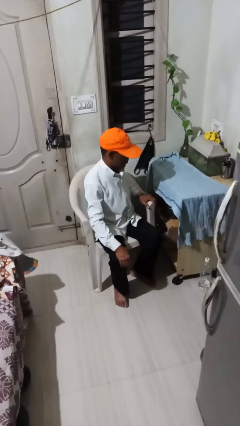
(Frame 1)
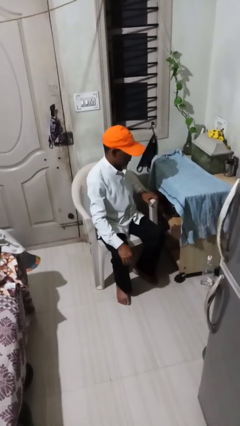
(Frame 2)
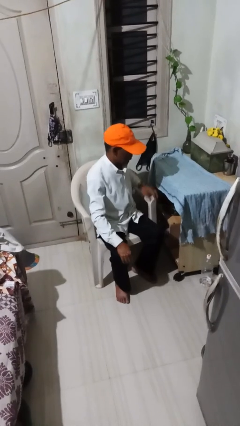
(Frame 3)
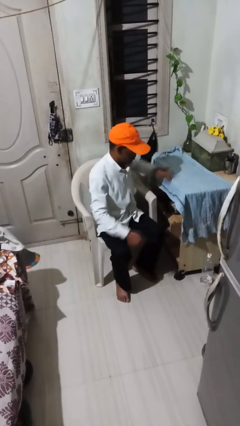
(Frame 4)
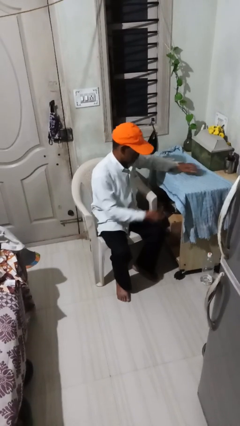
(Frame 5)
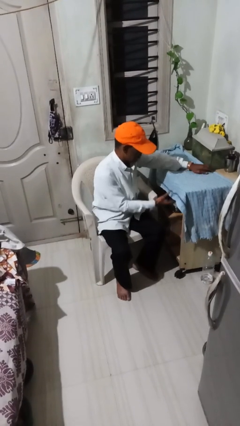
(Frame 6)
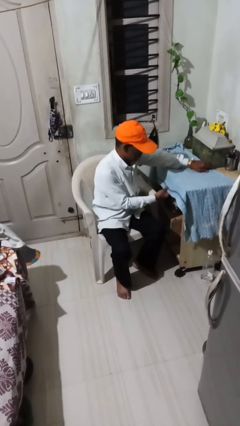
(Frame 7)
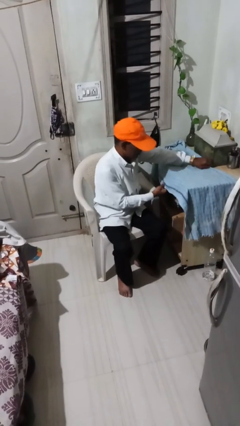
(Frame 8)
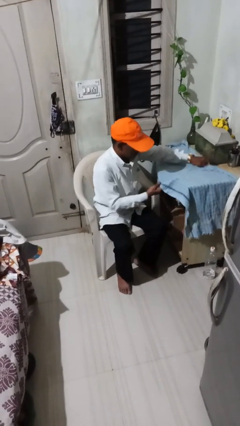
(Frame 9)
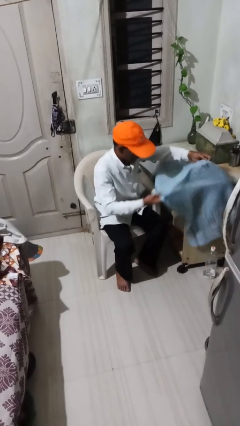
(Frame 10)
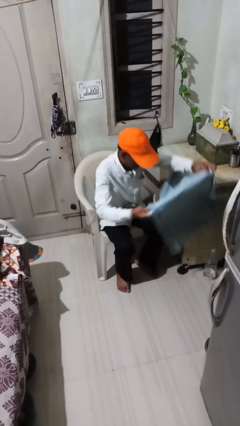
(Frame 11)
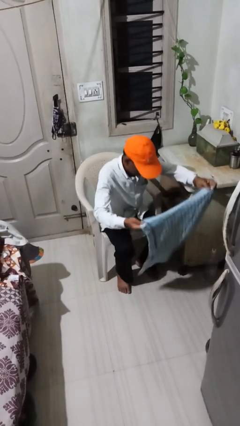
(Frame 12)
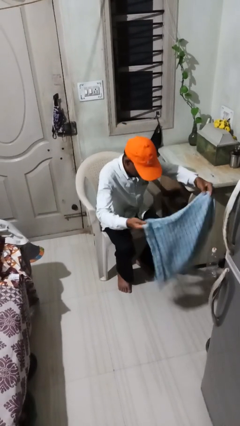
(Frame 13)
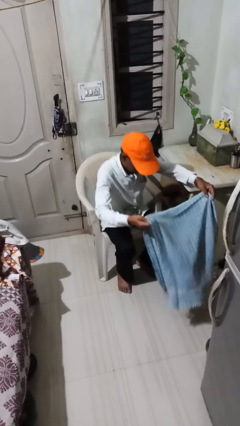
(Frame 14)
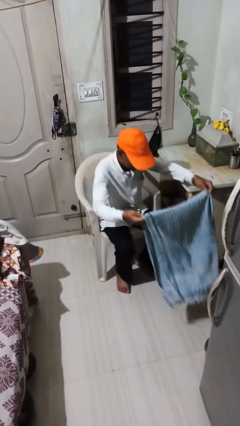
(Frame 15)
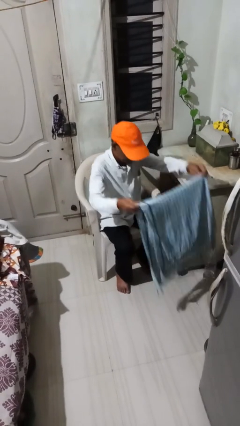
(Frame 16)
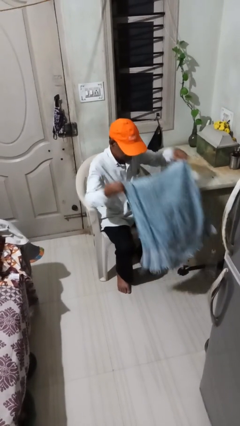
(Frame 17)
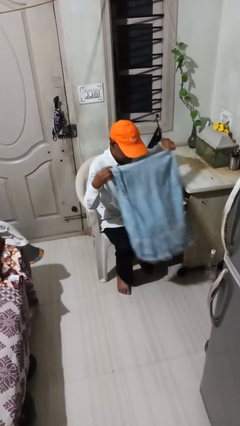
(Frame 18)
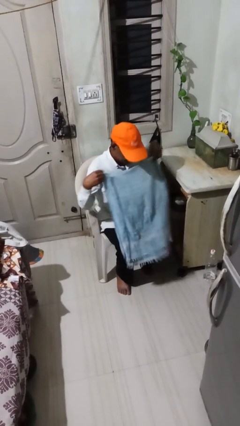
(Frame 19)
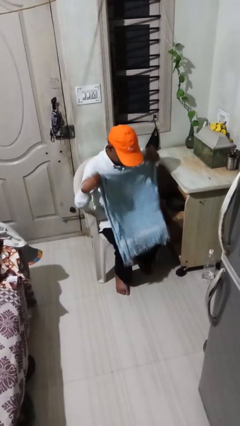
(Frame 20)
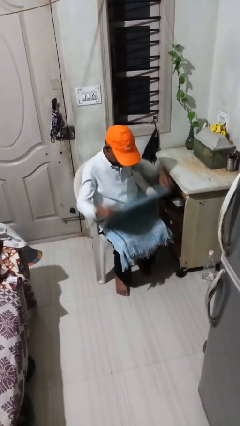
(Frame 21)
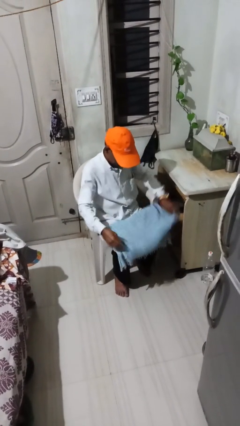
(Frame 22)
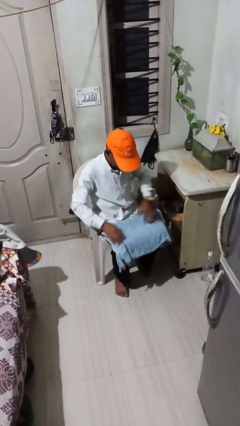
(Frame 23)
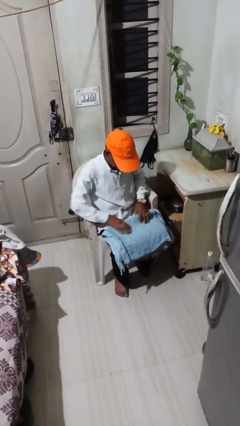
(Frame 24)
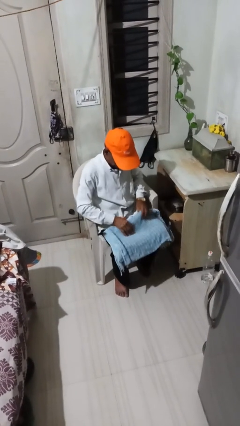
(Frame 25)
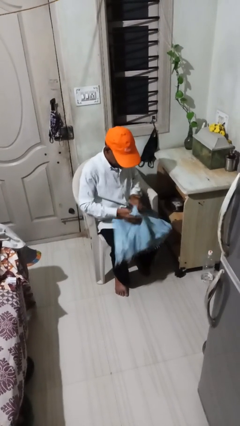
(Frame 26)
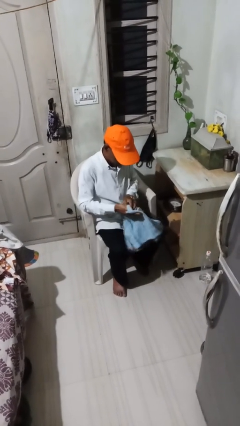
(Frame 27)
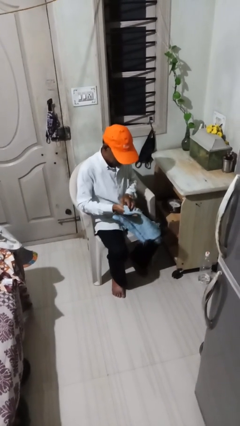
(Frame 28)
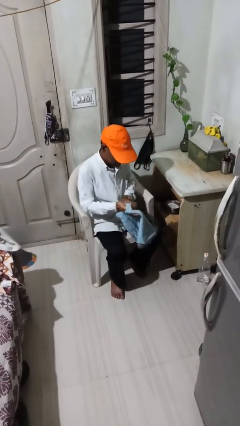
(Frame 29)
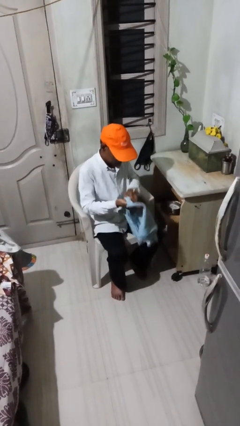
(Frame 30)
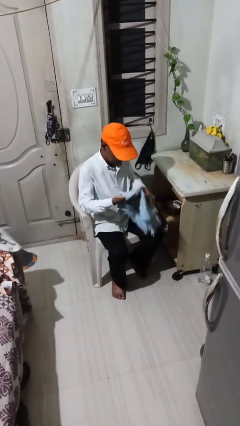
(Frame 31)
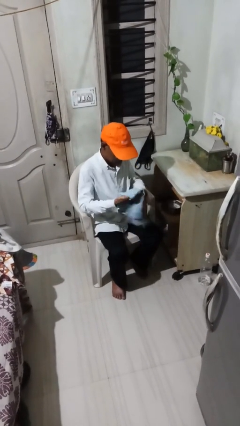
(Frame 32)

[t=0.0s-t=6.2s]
person folds tablecloth

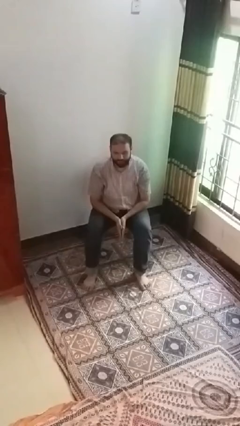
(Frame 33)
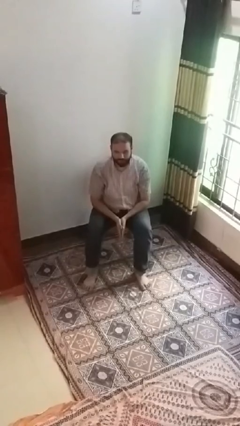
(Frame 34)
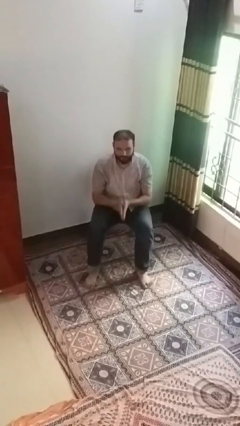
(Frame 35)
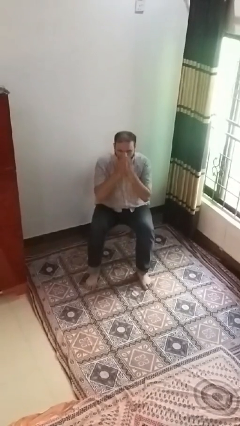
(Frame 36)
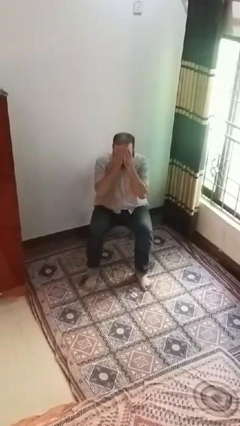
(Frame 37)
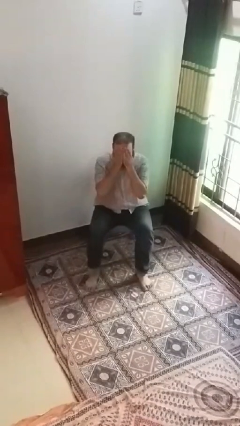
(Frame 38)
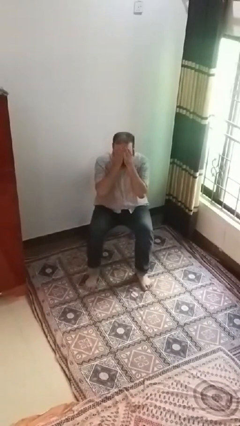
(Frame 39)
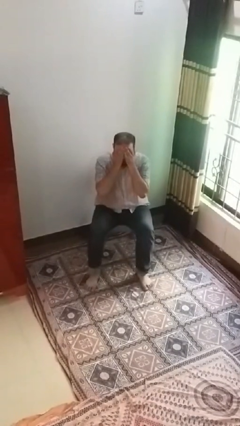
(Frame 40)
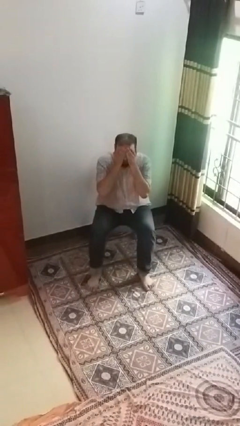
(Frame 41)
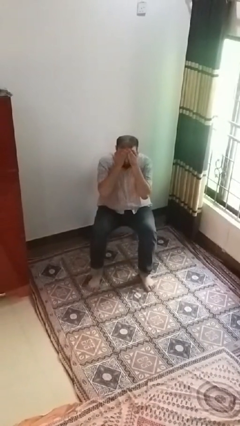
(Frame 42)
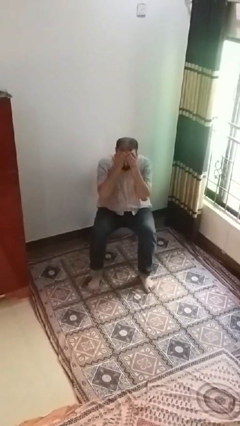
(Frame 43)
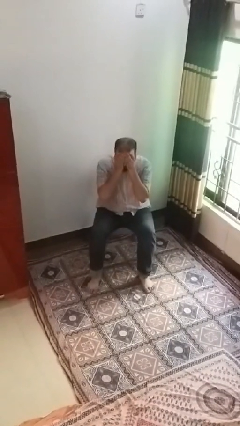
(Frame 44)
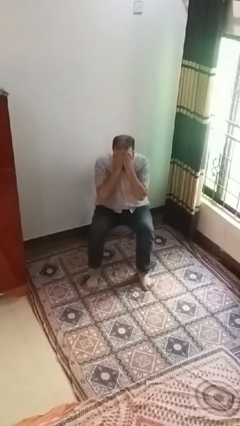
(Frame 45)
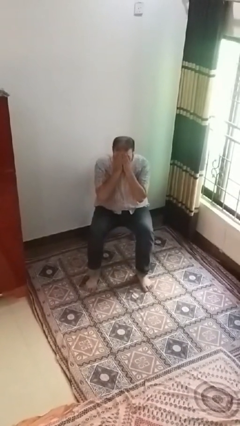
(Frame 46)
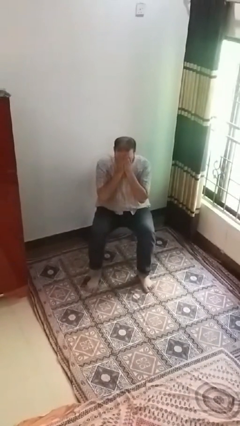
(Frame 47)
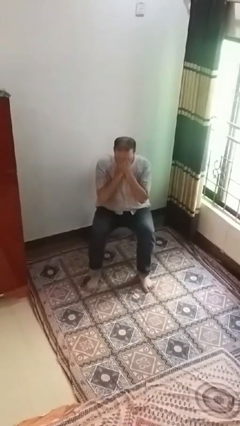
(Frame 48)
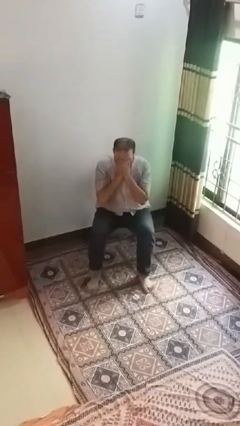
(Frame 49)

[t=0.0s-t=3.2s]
person covers face with hands

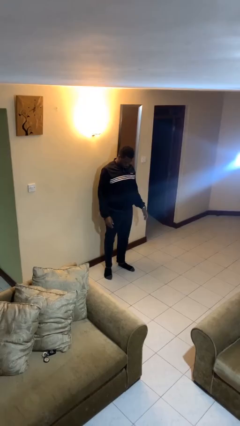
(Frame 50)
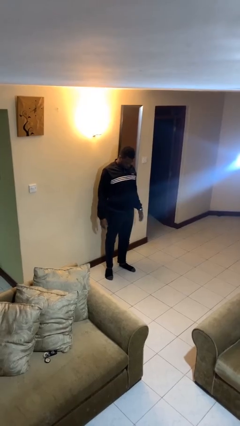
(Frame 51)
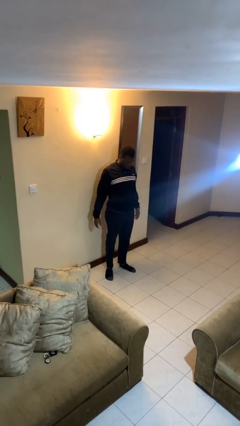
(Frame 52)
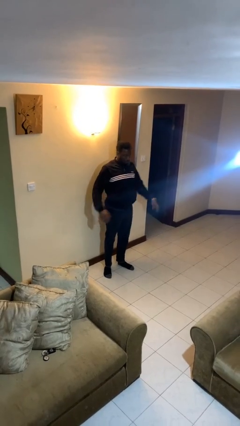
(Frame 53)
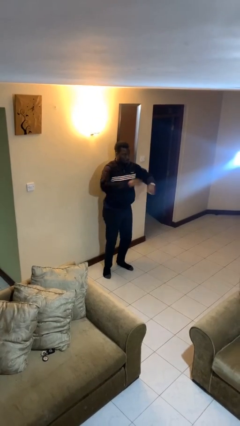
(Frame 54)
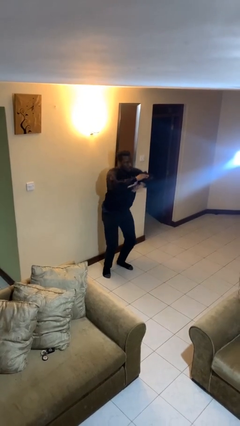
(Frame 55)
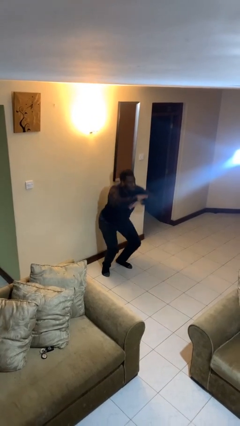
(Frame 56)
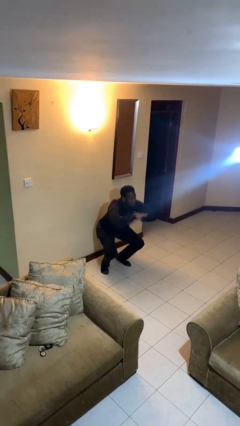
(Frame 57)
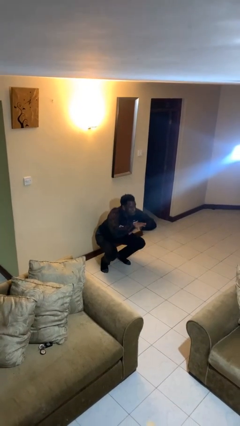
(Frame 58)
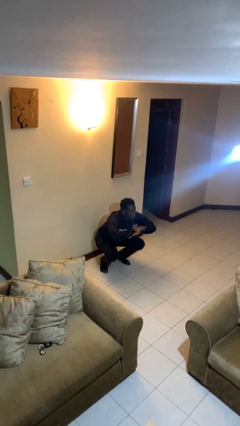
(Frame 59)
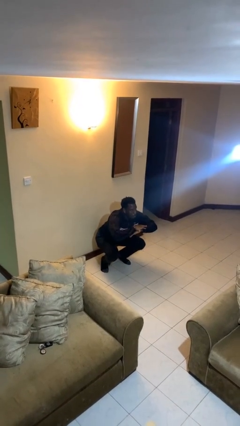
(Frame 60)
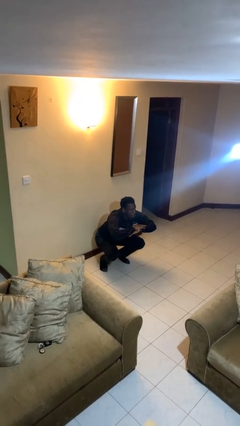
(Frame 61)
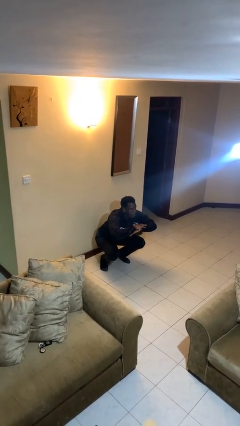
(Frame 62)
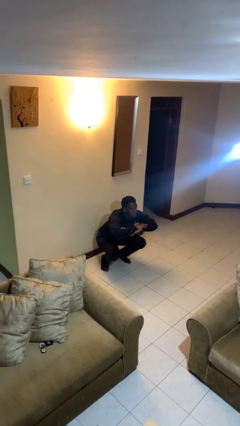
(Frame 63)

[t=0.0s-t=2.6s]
person squats

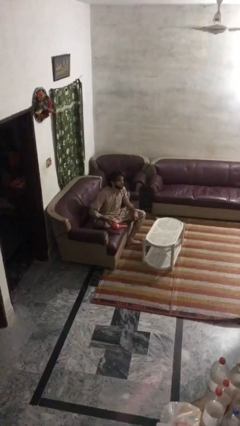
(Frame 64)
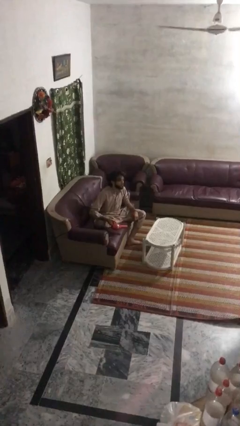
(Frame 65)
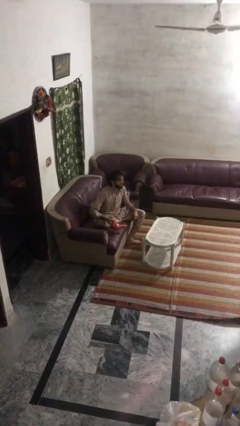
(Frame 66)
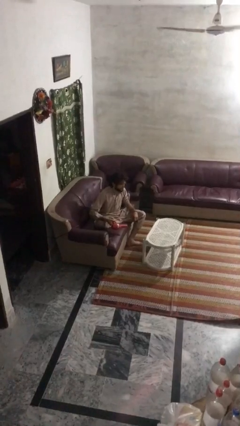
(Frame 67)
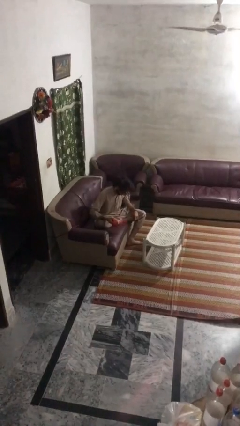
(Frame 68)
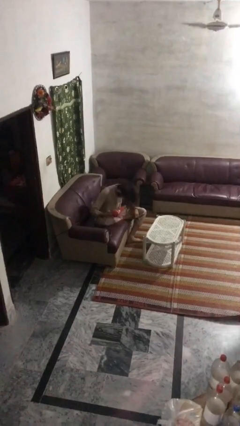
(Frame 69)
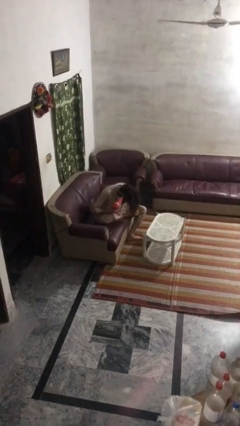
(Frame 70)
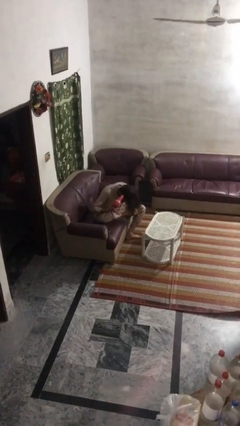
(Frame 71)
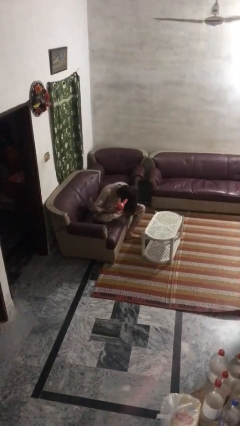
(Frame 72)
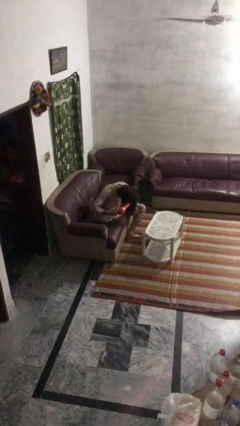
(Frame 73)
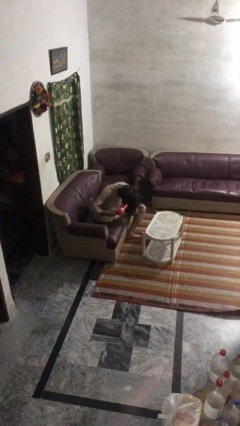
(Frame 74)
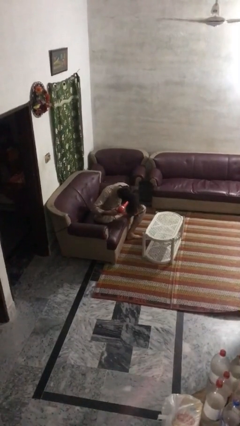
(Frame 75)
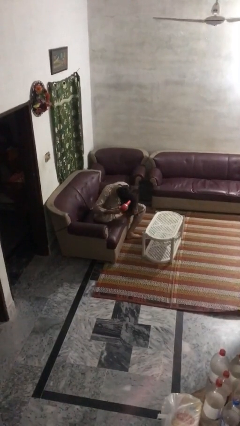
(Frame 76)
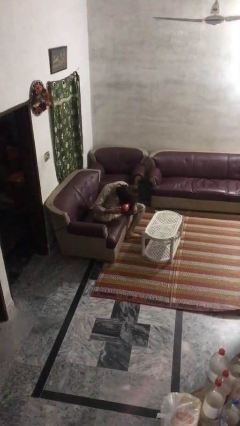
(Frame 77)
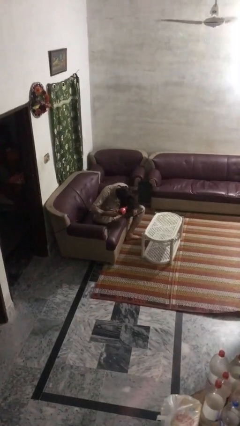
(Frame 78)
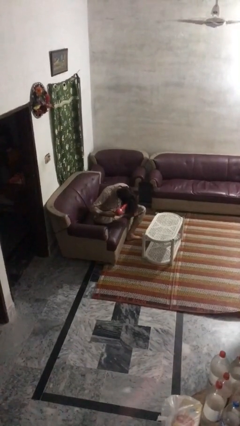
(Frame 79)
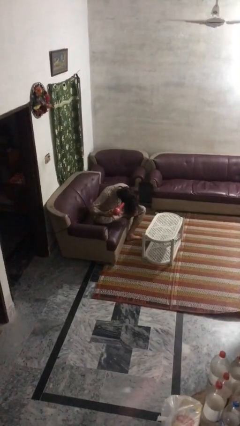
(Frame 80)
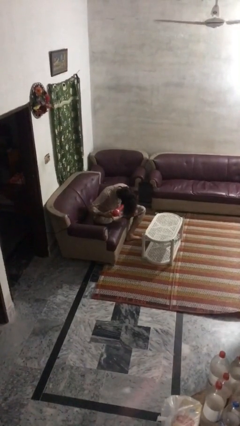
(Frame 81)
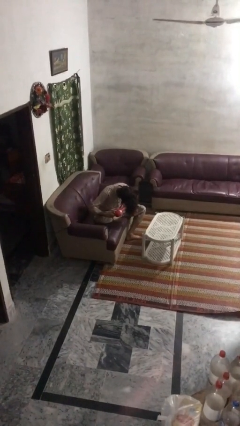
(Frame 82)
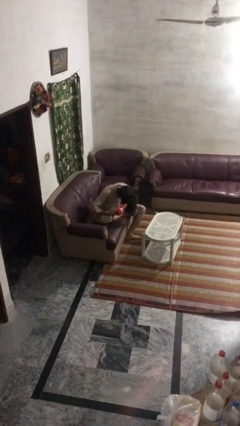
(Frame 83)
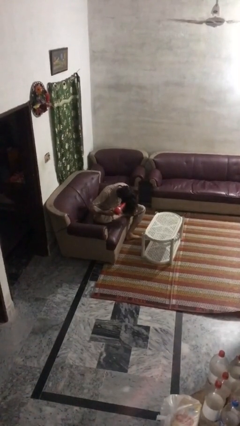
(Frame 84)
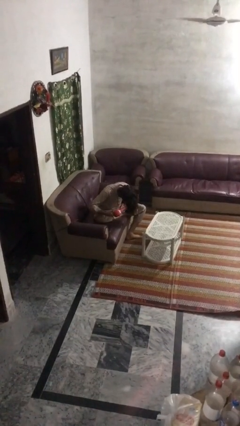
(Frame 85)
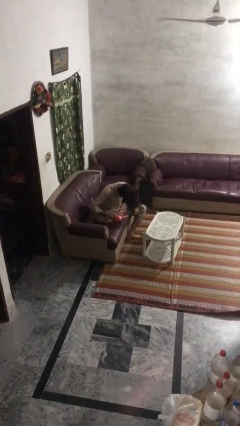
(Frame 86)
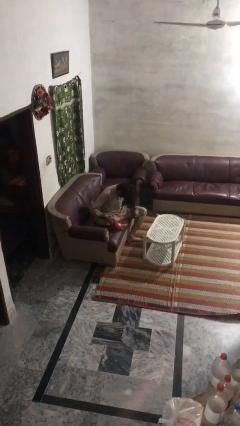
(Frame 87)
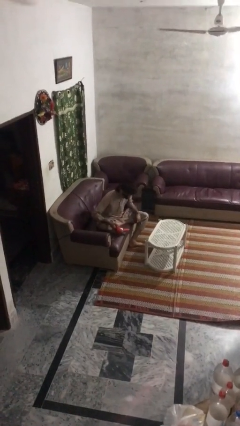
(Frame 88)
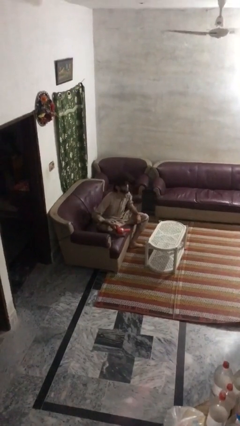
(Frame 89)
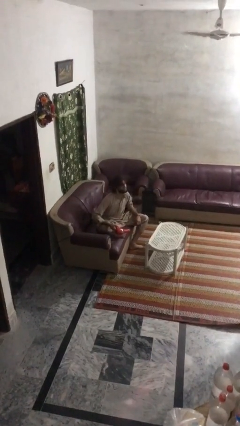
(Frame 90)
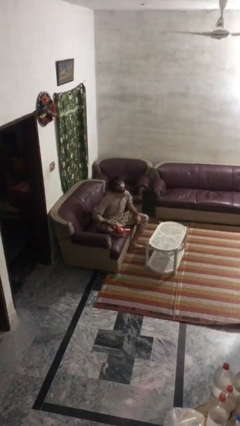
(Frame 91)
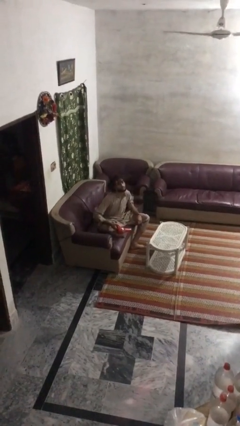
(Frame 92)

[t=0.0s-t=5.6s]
person dries hair with hairdryer
